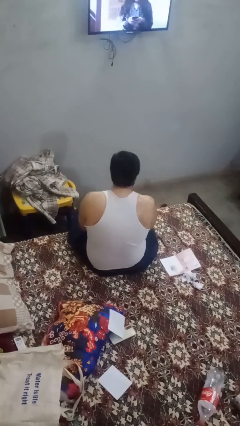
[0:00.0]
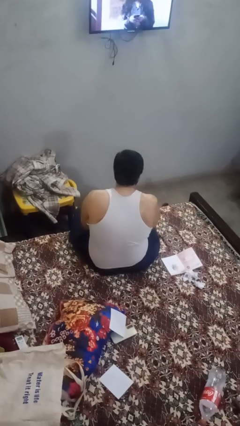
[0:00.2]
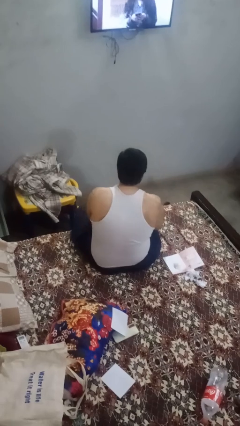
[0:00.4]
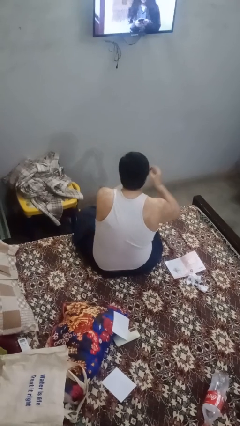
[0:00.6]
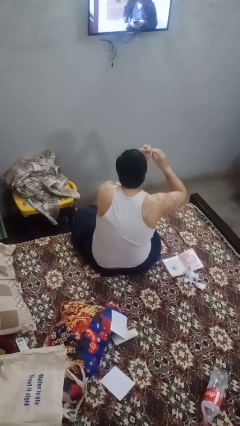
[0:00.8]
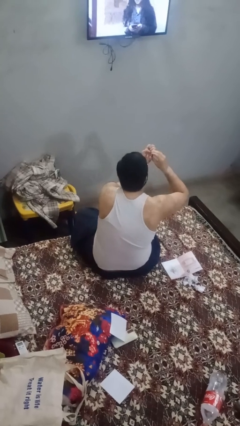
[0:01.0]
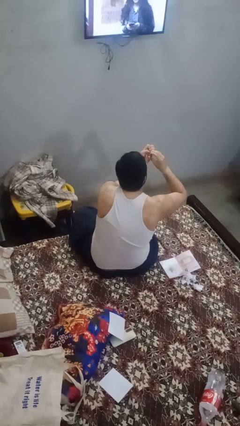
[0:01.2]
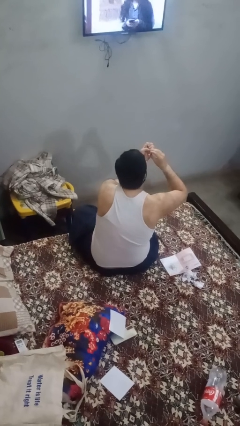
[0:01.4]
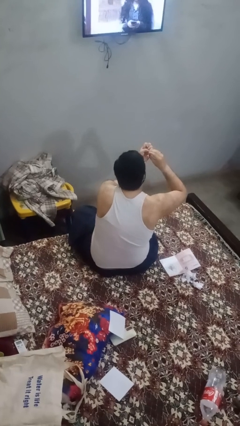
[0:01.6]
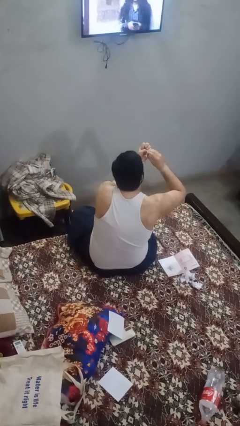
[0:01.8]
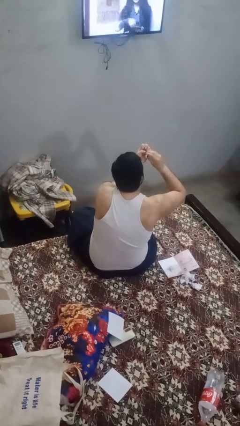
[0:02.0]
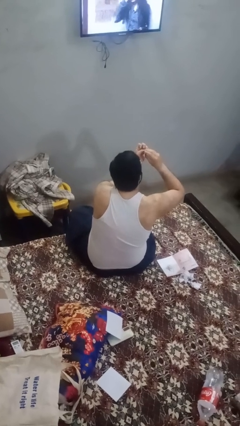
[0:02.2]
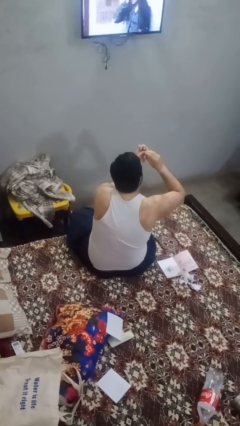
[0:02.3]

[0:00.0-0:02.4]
person clips fingernails

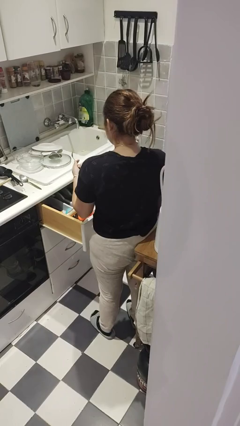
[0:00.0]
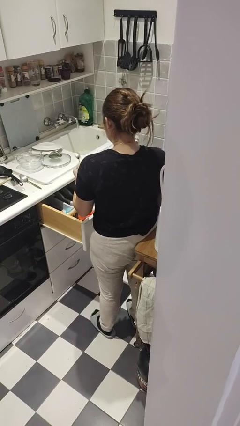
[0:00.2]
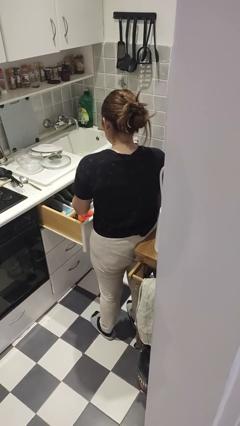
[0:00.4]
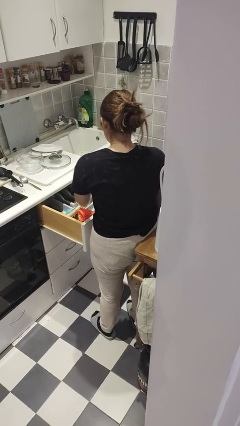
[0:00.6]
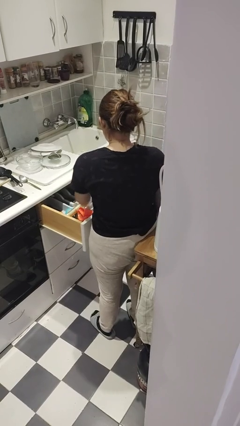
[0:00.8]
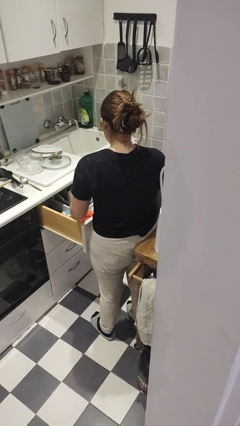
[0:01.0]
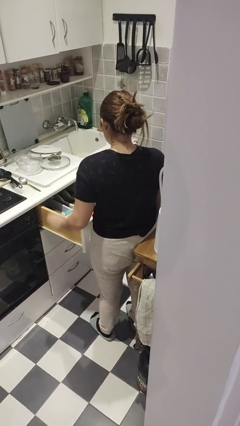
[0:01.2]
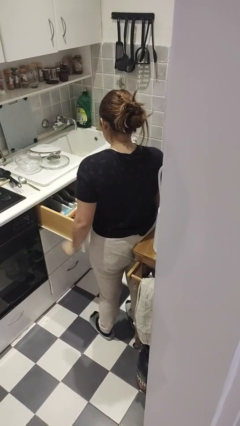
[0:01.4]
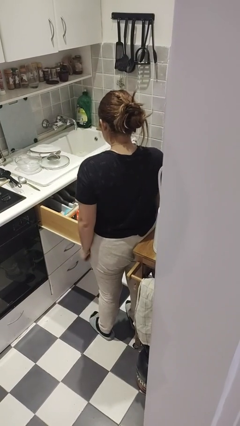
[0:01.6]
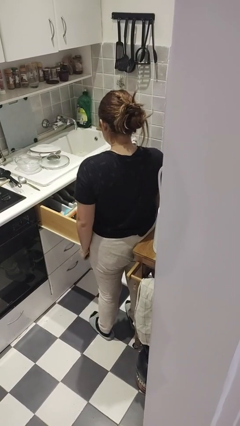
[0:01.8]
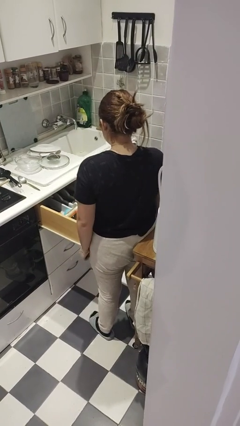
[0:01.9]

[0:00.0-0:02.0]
person puts object into kitchen drawer

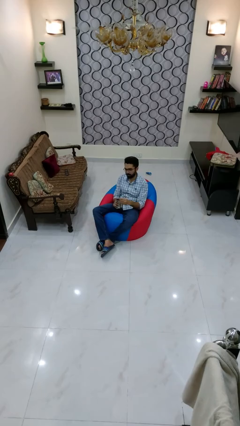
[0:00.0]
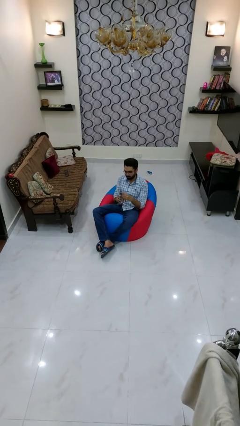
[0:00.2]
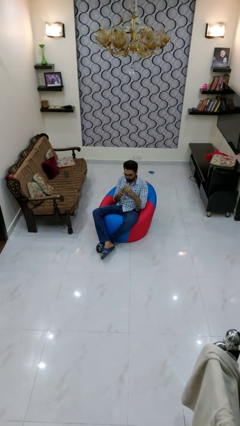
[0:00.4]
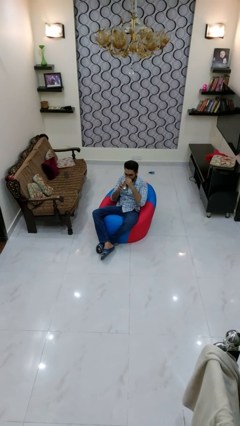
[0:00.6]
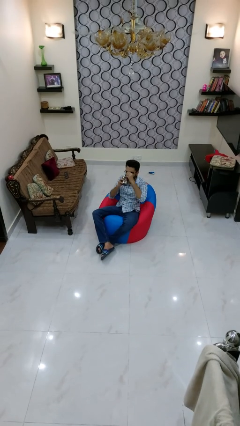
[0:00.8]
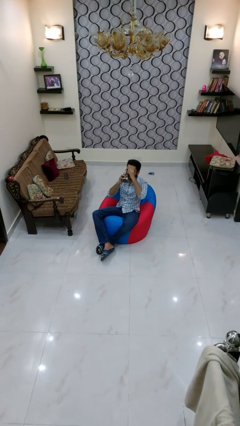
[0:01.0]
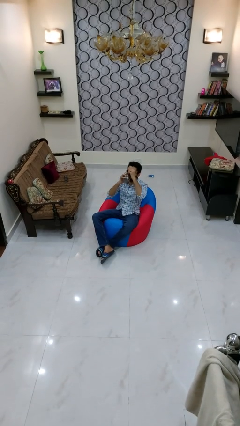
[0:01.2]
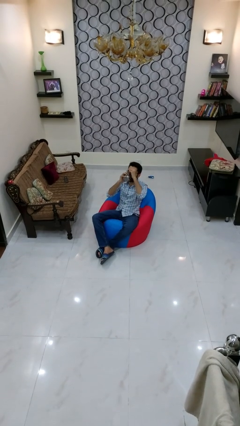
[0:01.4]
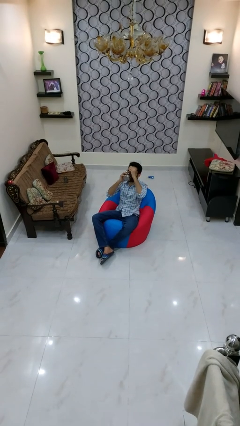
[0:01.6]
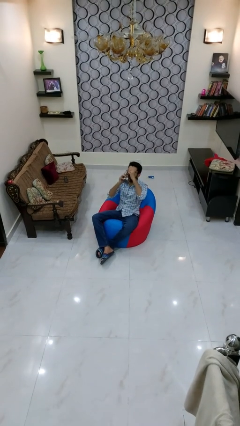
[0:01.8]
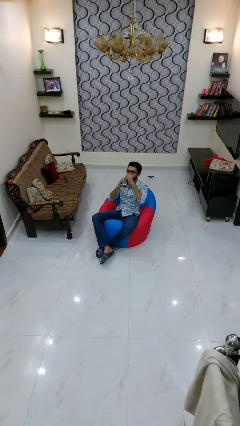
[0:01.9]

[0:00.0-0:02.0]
person drinks from mug

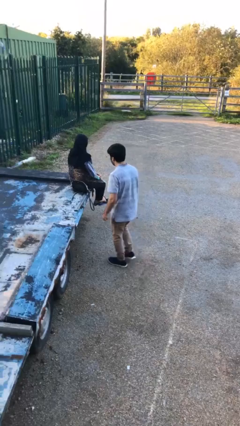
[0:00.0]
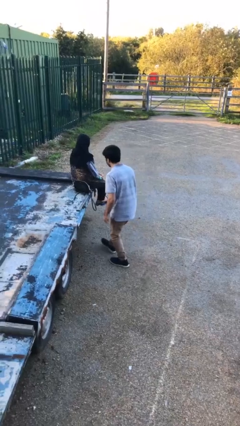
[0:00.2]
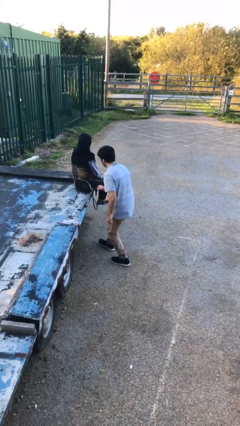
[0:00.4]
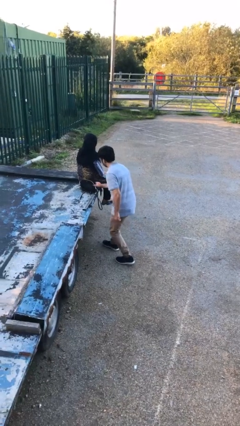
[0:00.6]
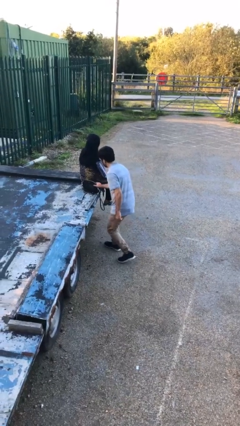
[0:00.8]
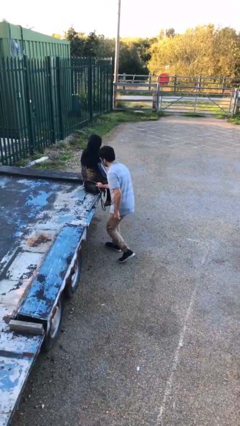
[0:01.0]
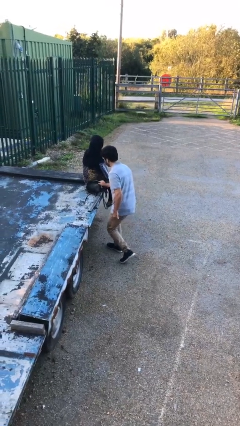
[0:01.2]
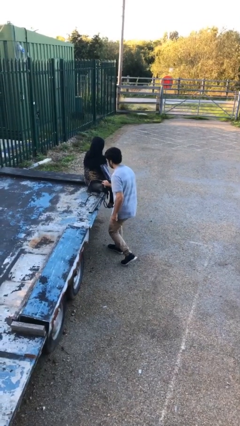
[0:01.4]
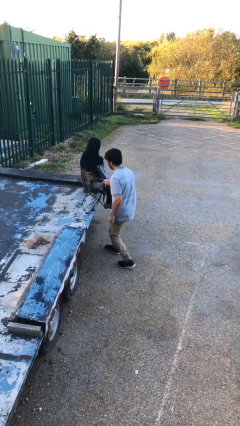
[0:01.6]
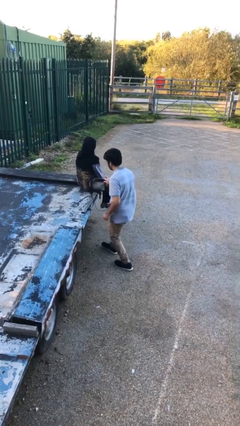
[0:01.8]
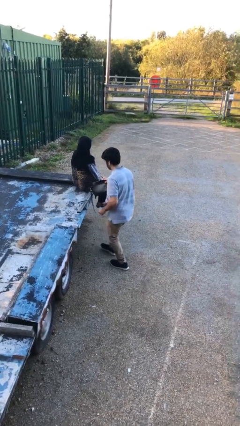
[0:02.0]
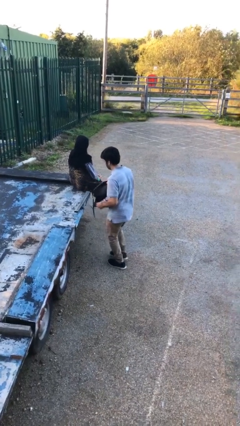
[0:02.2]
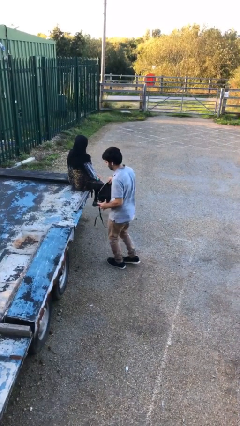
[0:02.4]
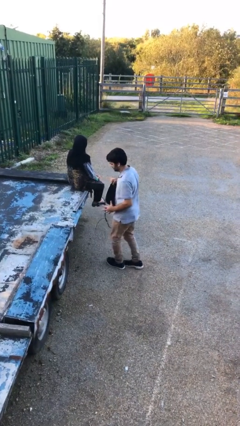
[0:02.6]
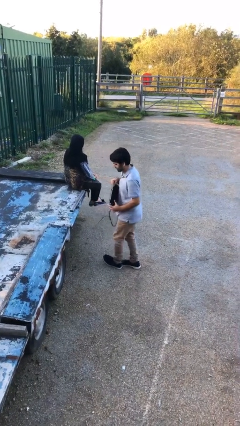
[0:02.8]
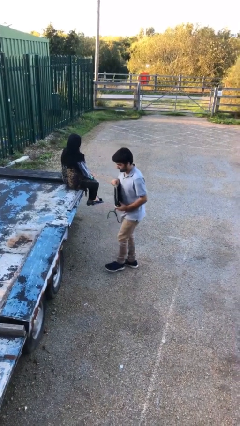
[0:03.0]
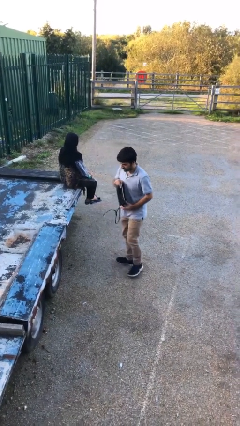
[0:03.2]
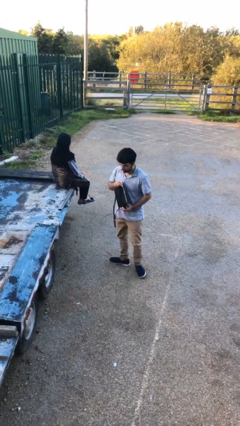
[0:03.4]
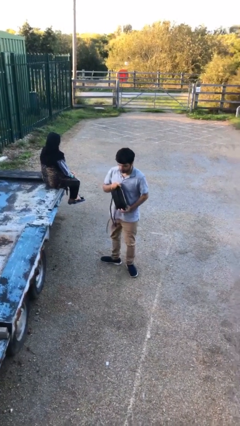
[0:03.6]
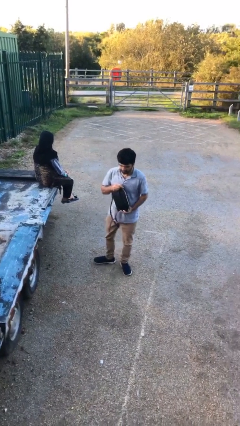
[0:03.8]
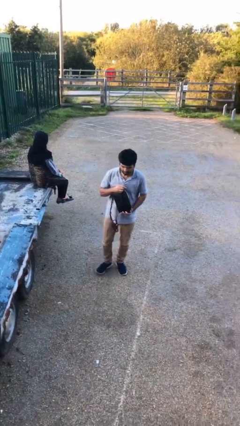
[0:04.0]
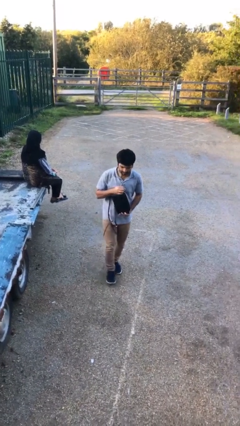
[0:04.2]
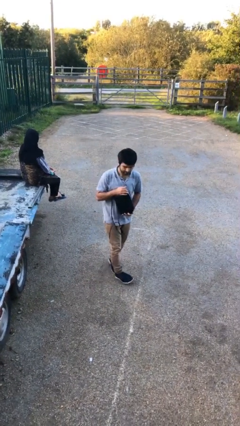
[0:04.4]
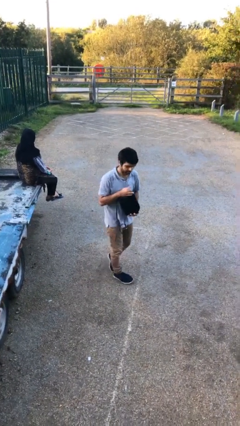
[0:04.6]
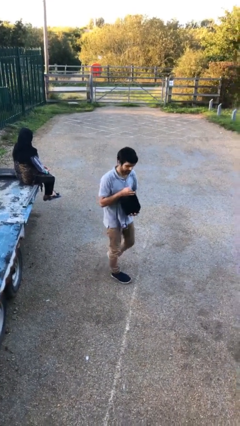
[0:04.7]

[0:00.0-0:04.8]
person steals object from person

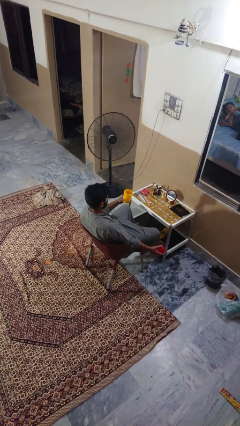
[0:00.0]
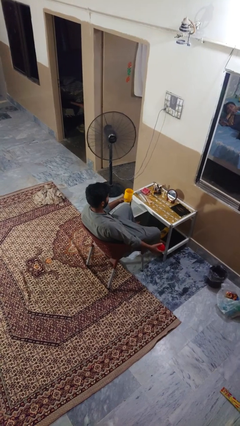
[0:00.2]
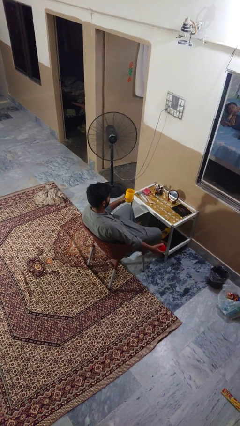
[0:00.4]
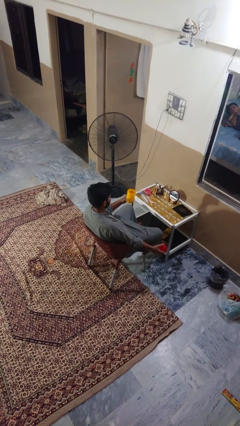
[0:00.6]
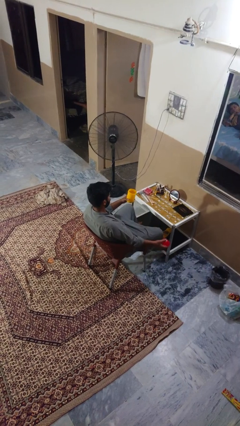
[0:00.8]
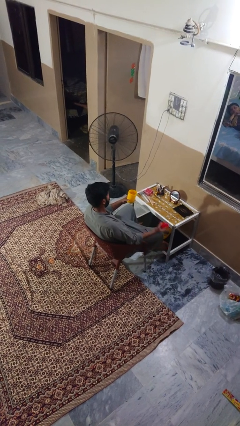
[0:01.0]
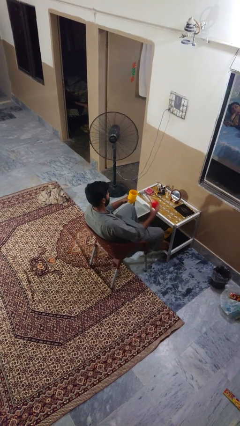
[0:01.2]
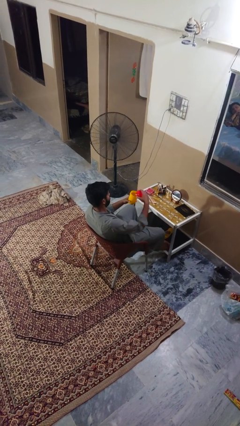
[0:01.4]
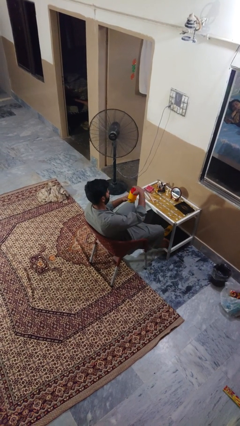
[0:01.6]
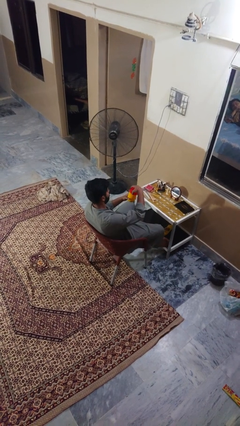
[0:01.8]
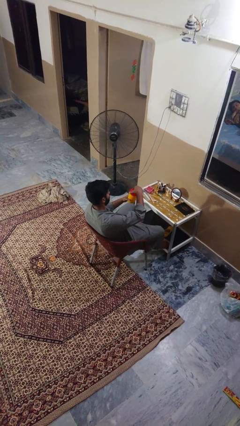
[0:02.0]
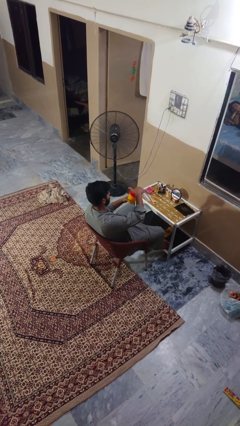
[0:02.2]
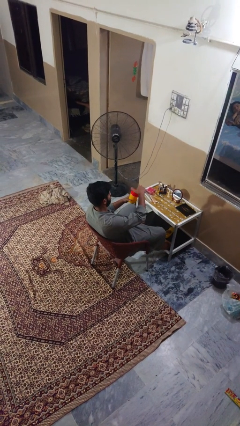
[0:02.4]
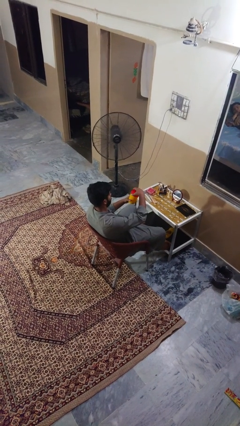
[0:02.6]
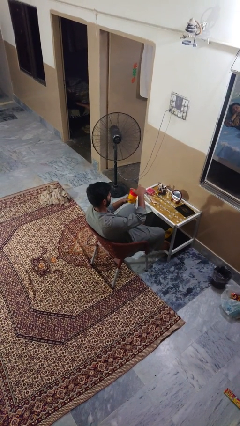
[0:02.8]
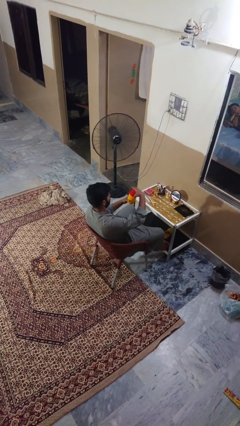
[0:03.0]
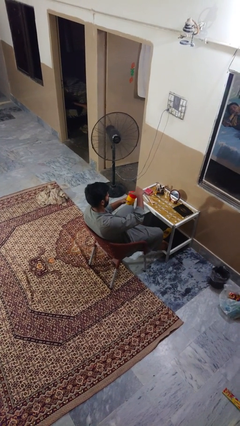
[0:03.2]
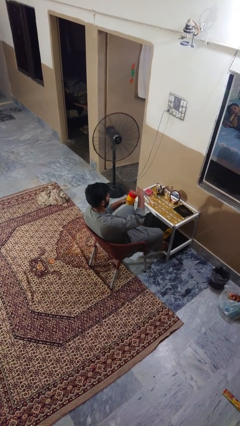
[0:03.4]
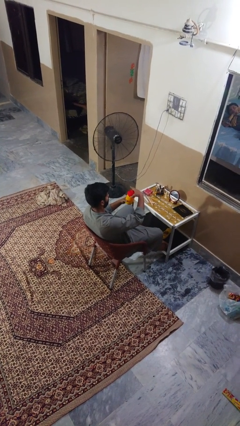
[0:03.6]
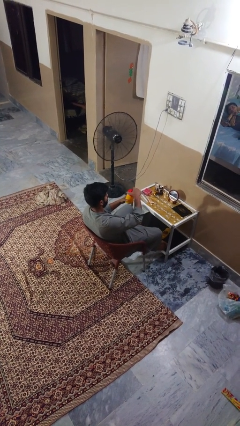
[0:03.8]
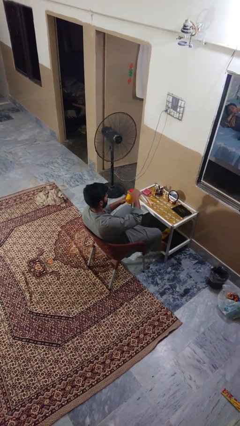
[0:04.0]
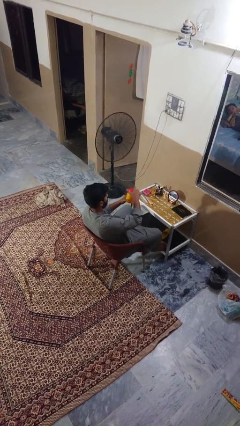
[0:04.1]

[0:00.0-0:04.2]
person closes jar

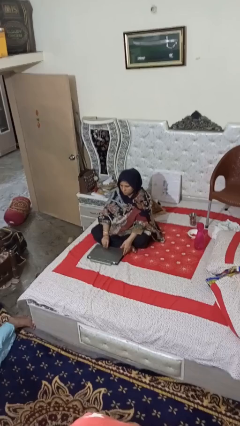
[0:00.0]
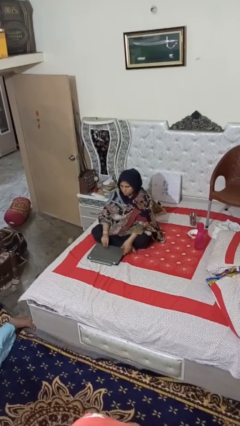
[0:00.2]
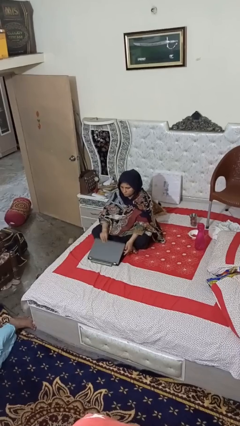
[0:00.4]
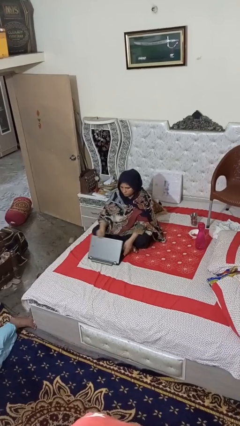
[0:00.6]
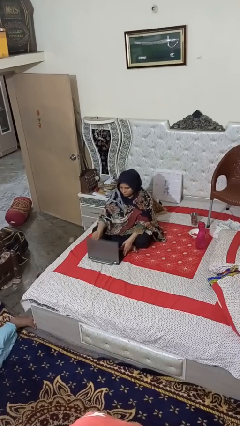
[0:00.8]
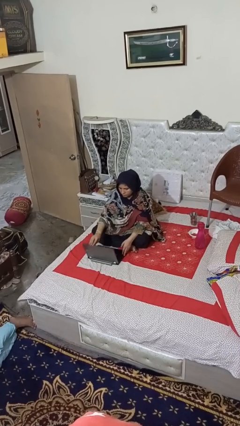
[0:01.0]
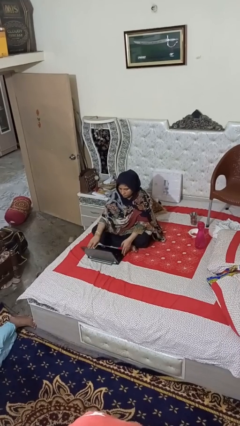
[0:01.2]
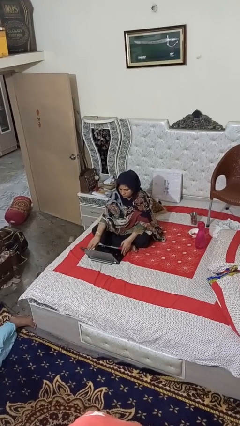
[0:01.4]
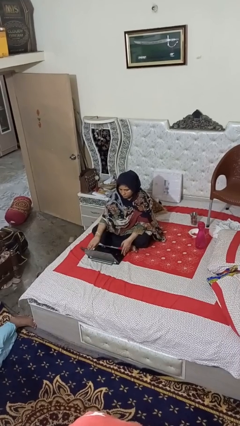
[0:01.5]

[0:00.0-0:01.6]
person opens laptop

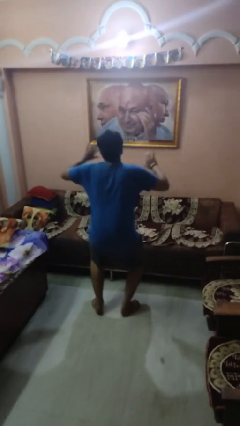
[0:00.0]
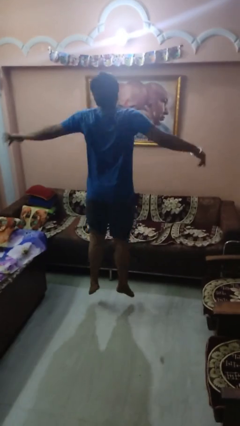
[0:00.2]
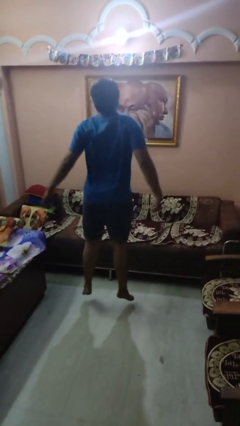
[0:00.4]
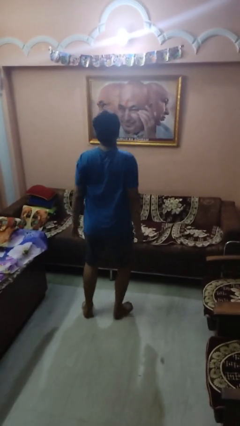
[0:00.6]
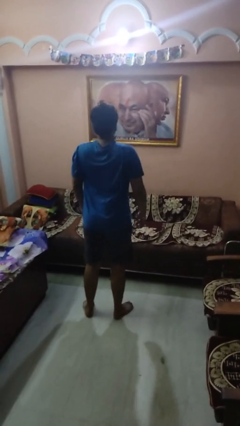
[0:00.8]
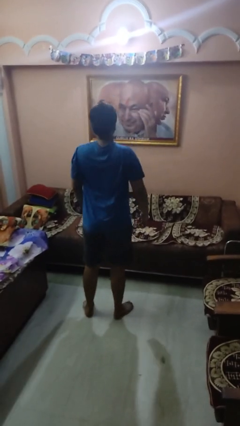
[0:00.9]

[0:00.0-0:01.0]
person jumps
